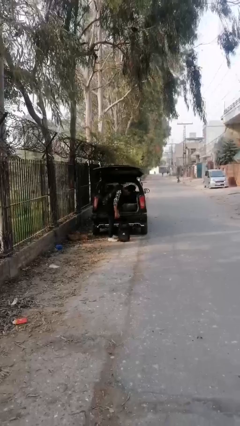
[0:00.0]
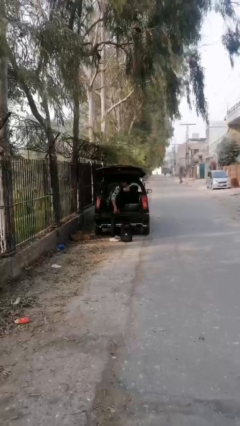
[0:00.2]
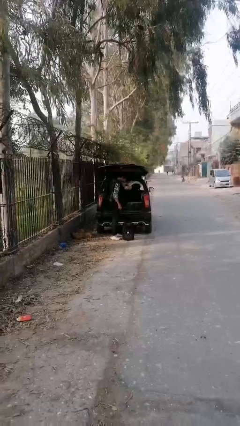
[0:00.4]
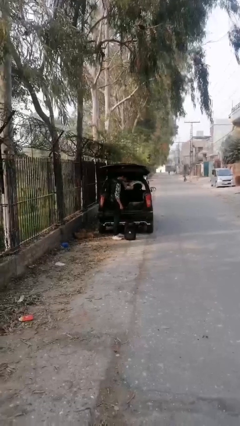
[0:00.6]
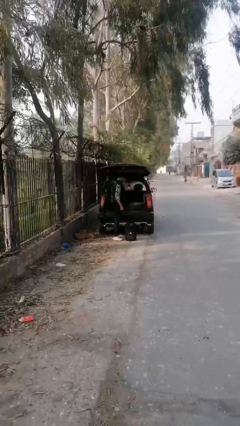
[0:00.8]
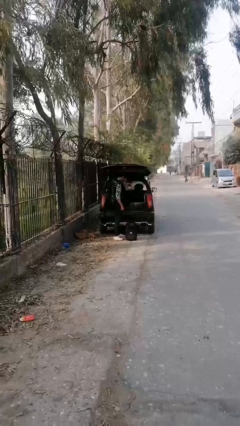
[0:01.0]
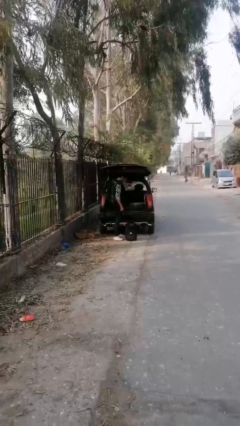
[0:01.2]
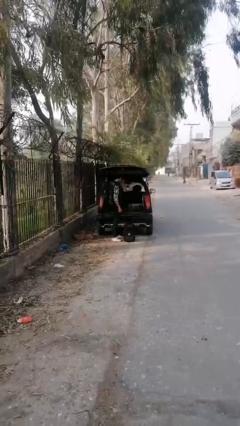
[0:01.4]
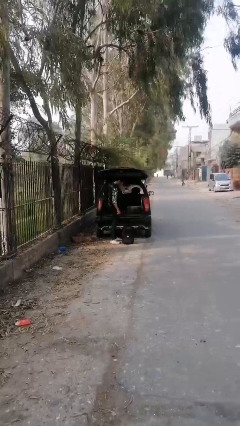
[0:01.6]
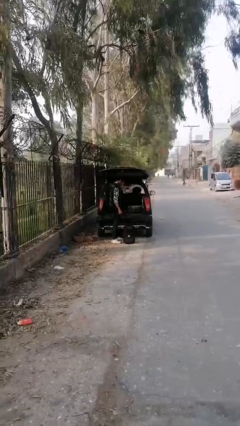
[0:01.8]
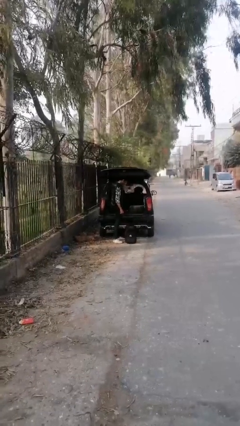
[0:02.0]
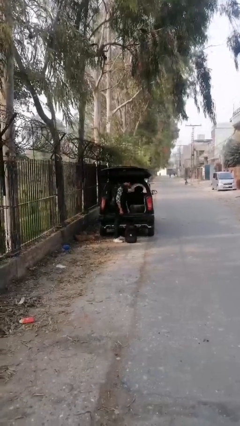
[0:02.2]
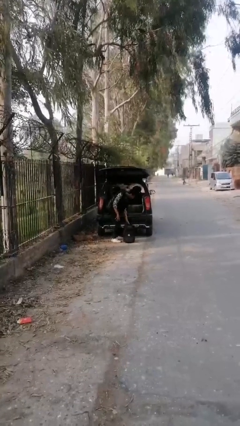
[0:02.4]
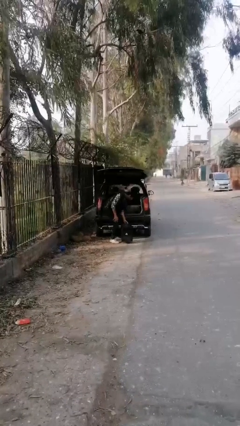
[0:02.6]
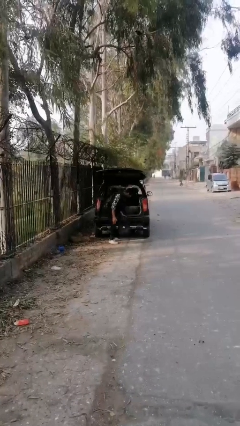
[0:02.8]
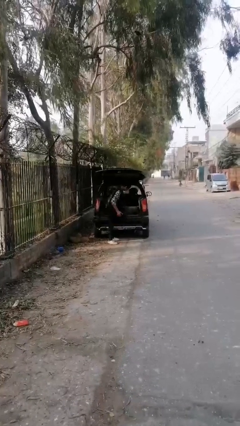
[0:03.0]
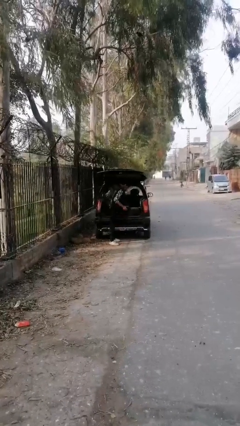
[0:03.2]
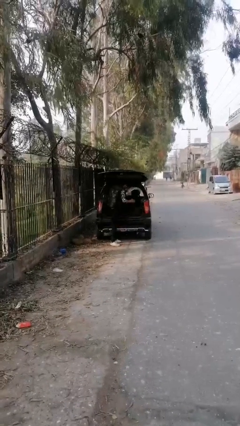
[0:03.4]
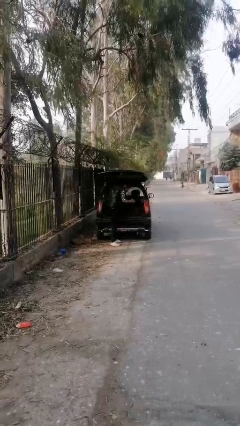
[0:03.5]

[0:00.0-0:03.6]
person unloads car

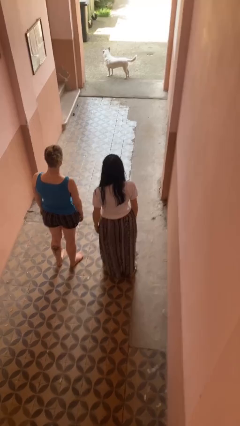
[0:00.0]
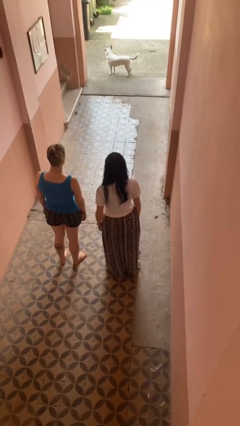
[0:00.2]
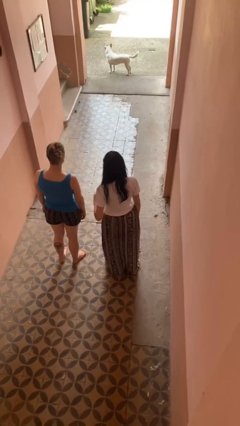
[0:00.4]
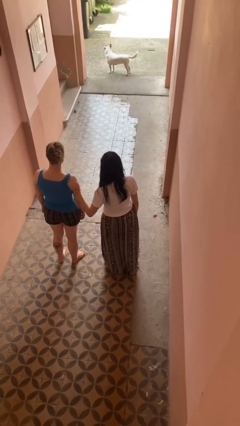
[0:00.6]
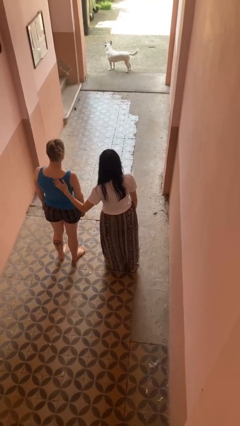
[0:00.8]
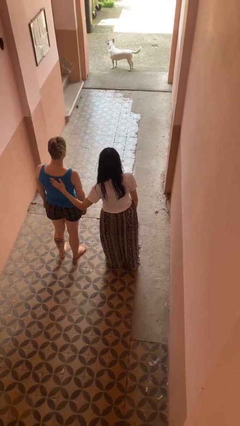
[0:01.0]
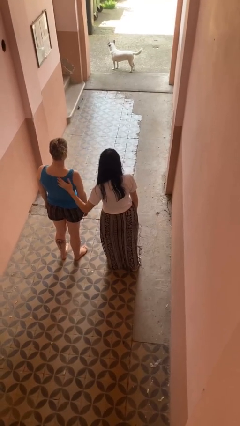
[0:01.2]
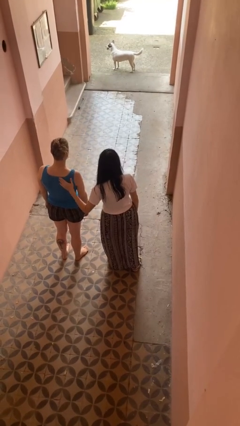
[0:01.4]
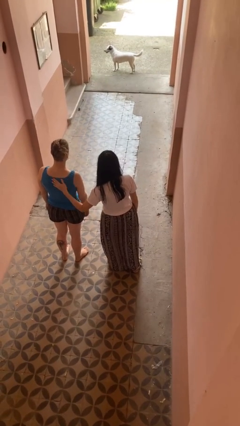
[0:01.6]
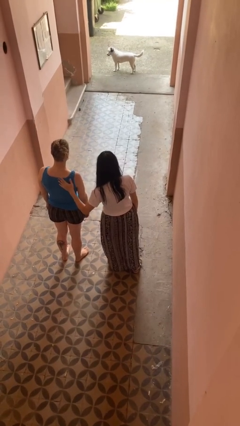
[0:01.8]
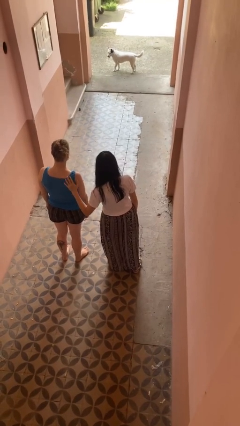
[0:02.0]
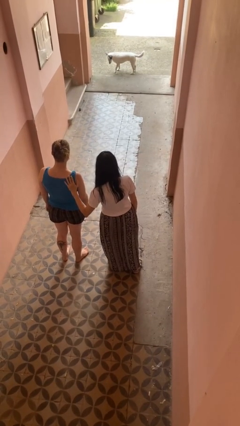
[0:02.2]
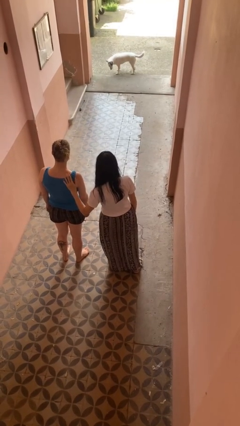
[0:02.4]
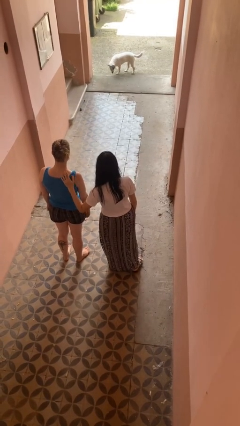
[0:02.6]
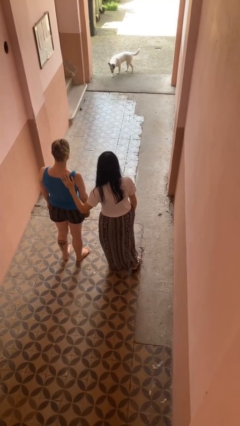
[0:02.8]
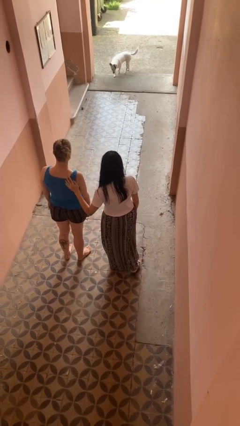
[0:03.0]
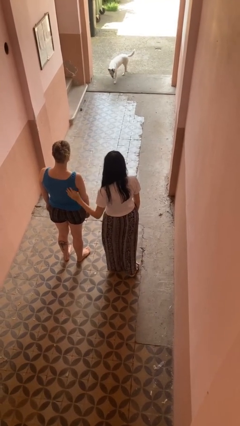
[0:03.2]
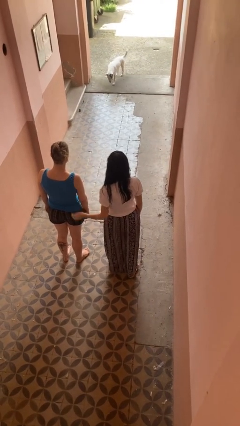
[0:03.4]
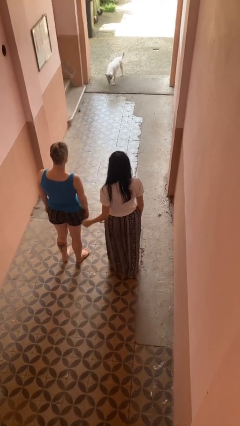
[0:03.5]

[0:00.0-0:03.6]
person touches back of person

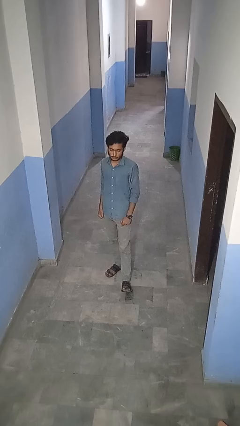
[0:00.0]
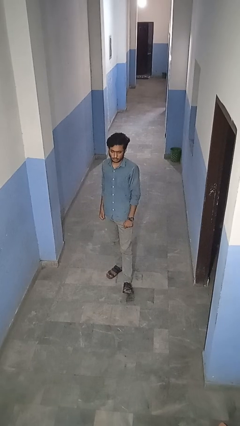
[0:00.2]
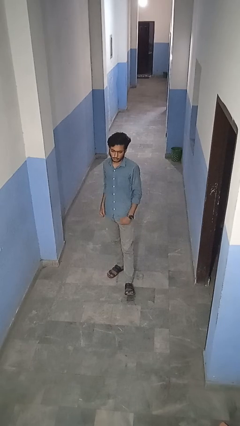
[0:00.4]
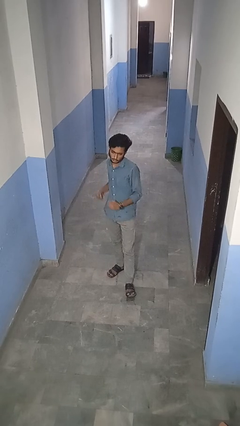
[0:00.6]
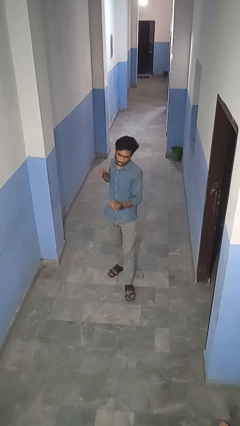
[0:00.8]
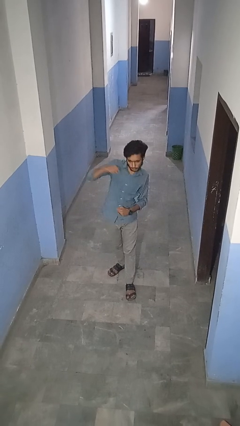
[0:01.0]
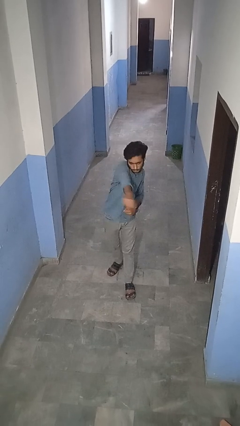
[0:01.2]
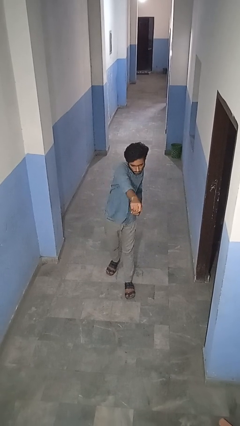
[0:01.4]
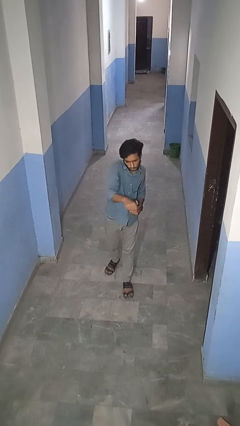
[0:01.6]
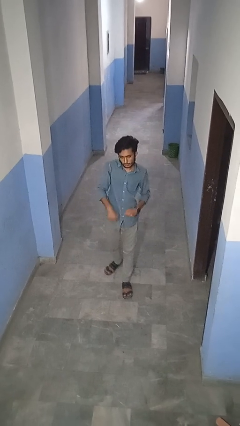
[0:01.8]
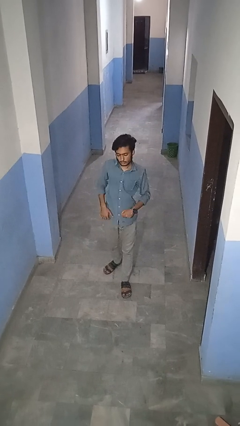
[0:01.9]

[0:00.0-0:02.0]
person punches

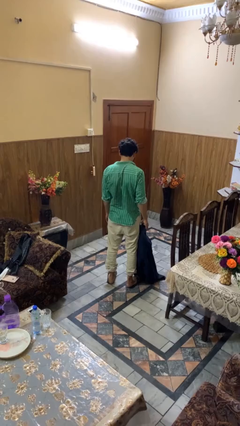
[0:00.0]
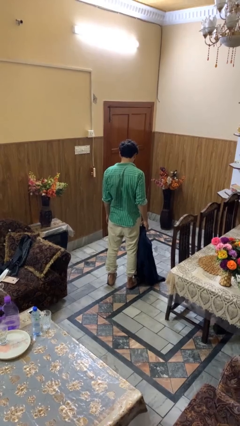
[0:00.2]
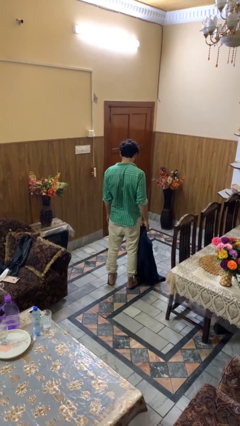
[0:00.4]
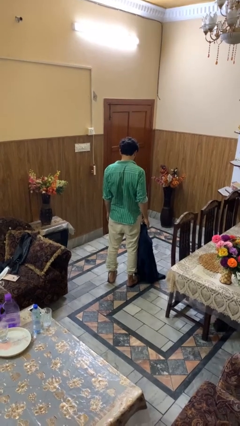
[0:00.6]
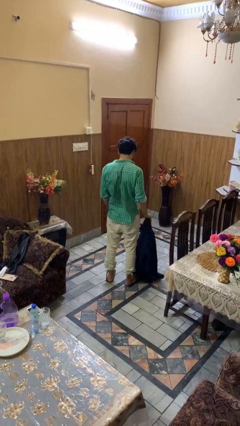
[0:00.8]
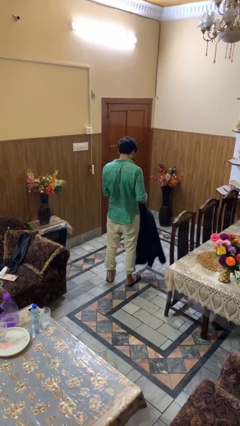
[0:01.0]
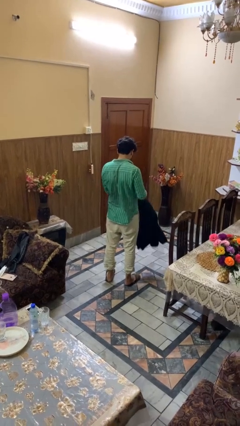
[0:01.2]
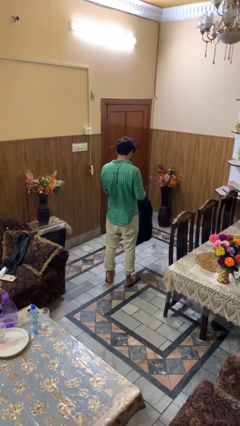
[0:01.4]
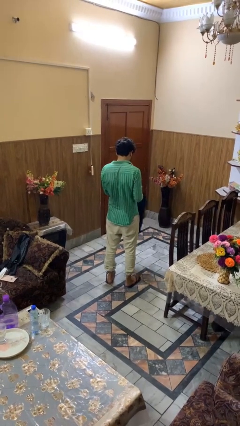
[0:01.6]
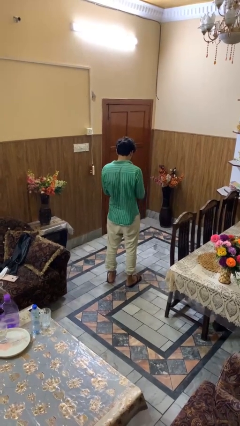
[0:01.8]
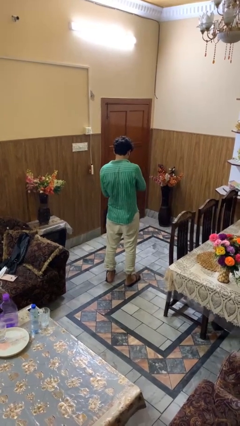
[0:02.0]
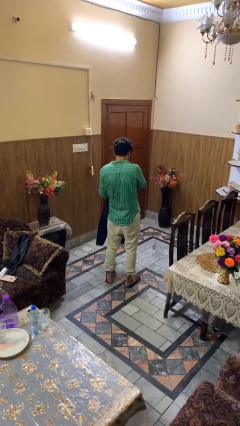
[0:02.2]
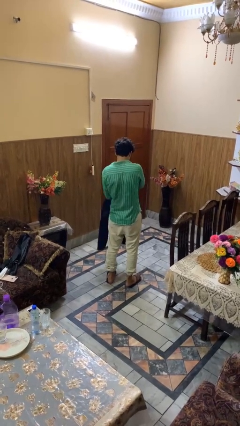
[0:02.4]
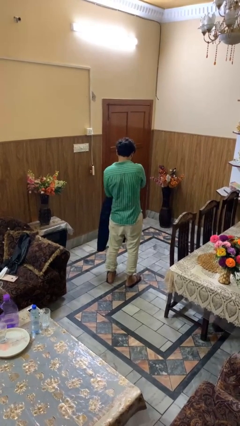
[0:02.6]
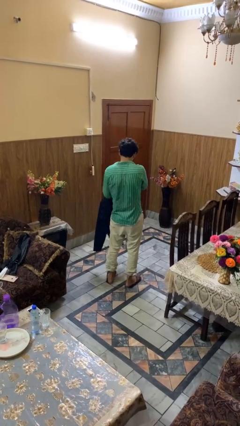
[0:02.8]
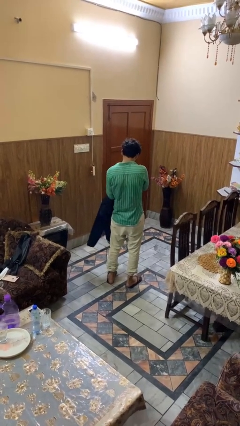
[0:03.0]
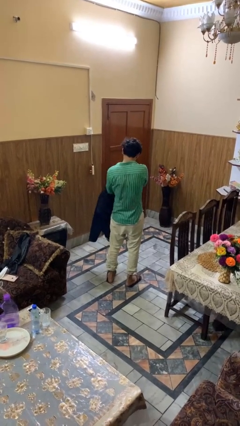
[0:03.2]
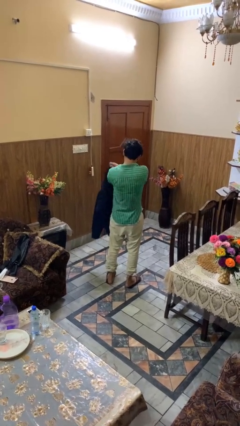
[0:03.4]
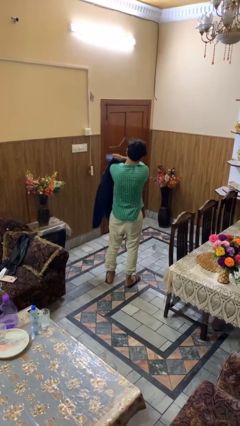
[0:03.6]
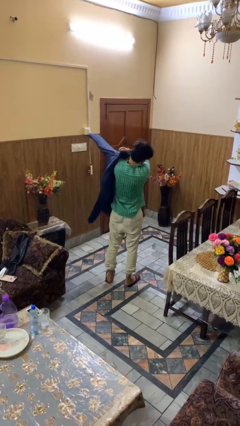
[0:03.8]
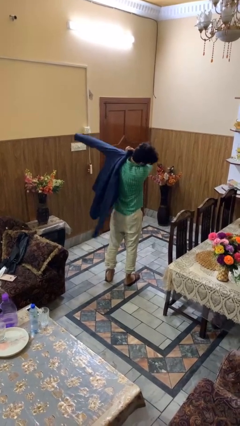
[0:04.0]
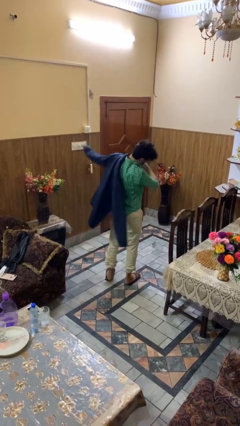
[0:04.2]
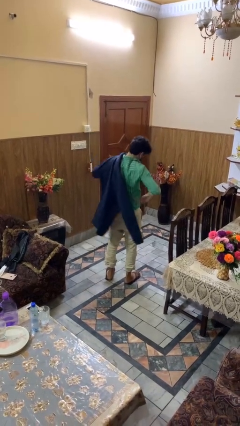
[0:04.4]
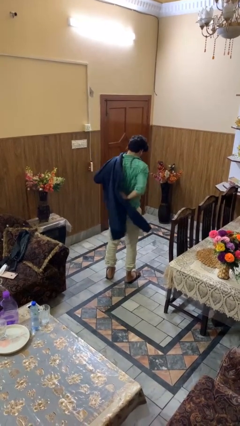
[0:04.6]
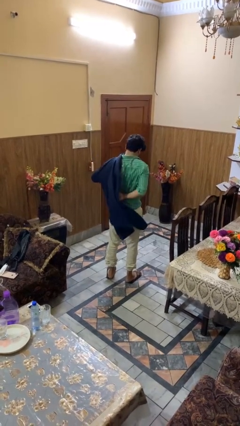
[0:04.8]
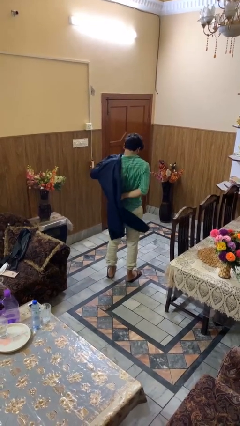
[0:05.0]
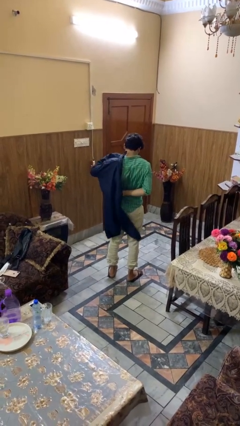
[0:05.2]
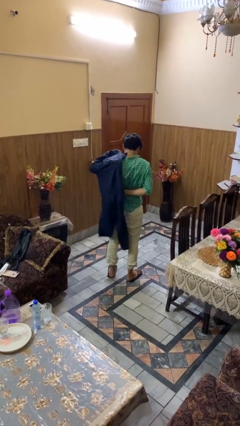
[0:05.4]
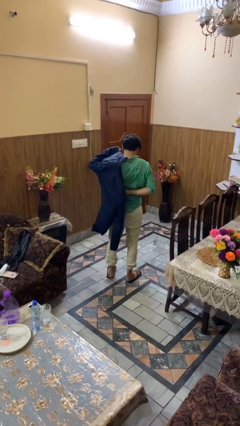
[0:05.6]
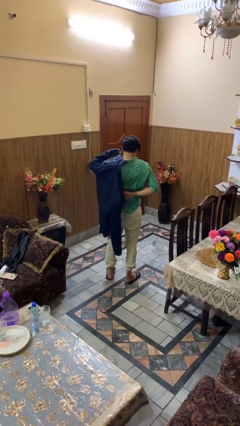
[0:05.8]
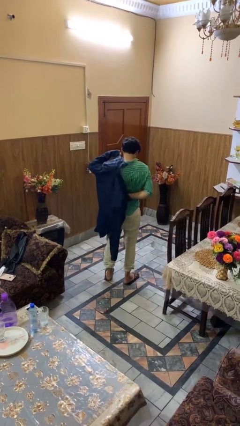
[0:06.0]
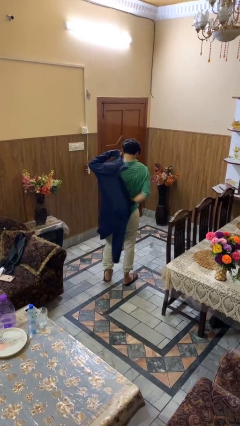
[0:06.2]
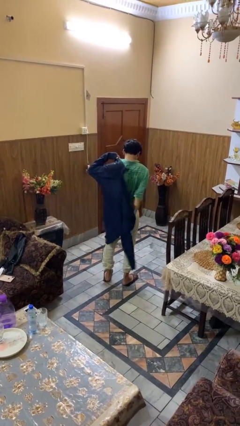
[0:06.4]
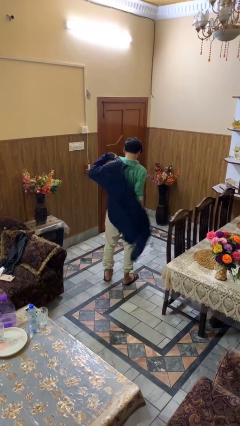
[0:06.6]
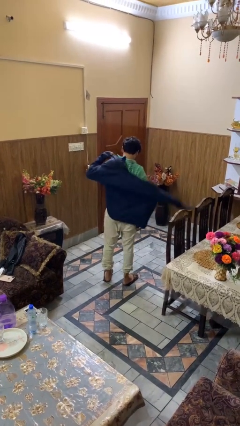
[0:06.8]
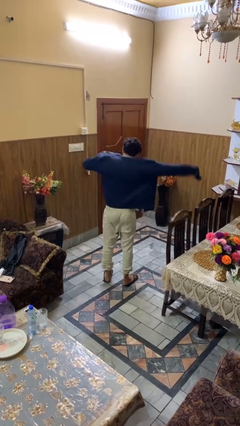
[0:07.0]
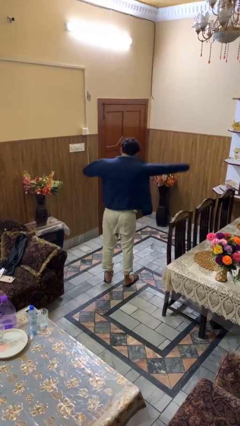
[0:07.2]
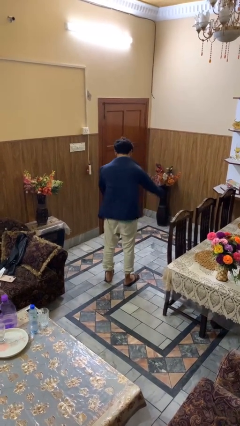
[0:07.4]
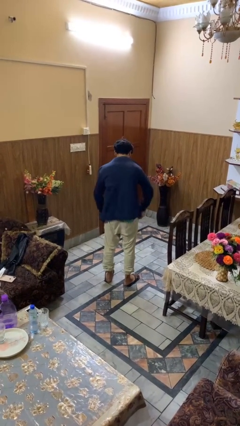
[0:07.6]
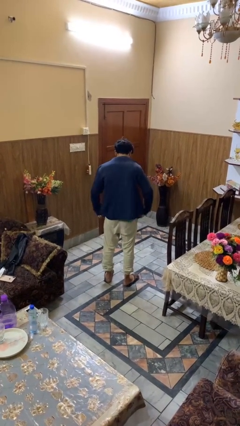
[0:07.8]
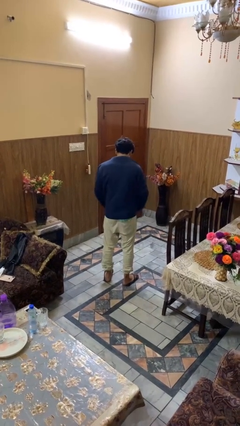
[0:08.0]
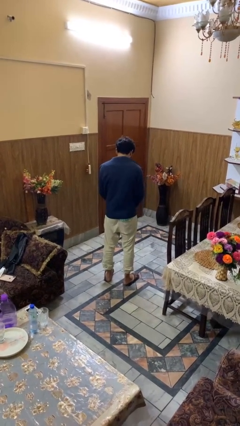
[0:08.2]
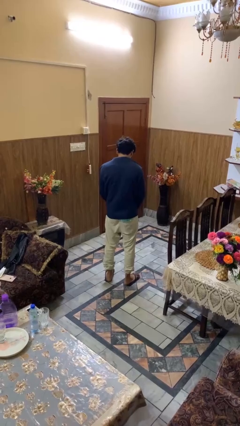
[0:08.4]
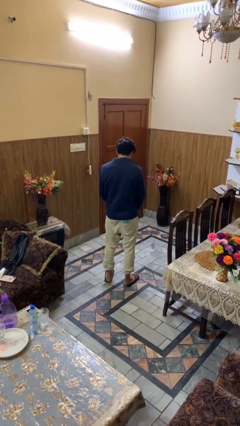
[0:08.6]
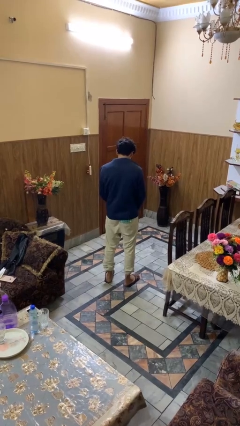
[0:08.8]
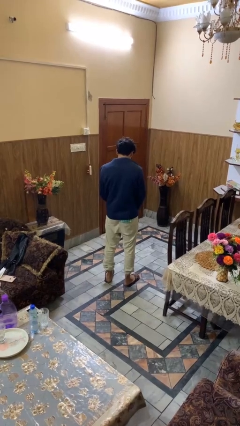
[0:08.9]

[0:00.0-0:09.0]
person puts on jacket
